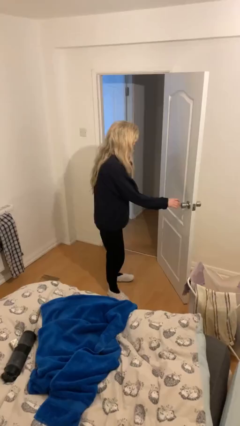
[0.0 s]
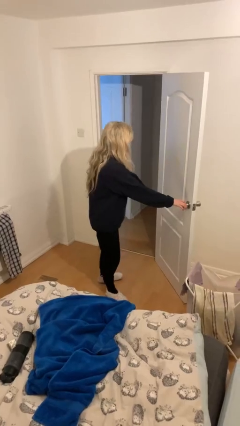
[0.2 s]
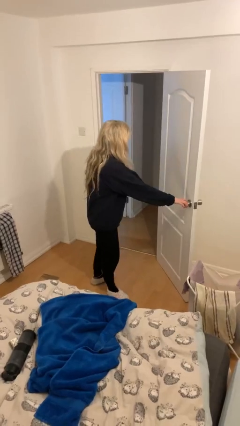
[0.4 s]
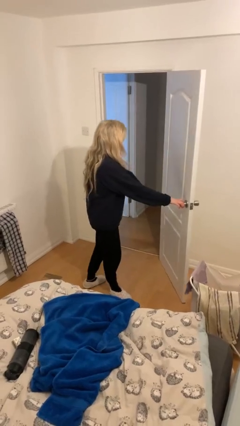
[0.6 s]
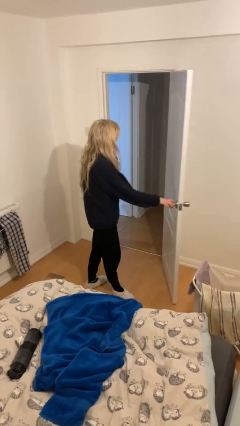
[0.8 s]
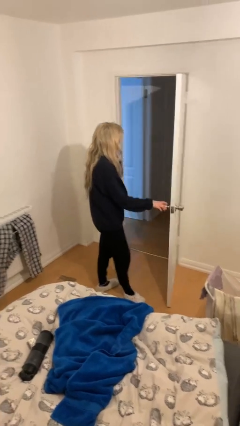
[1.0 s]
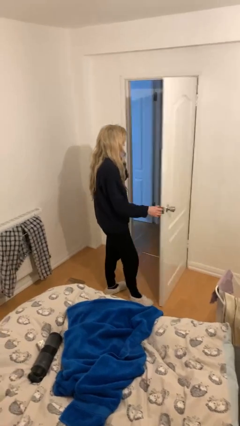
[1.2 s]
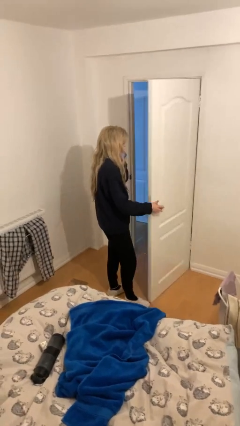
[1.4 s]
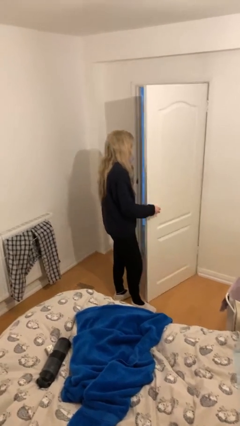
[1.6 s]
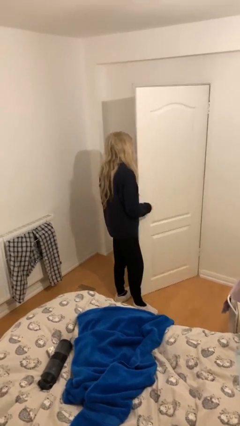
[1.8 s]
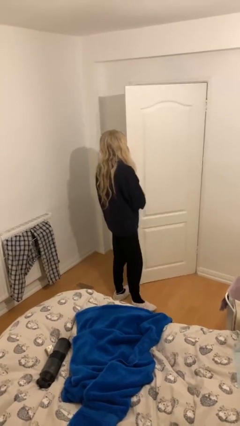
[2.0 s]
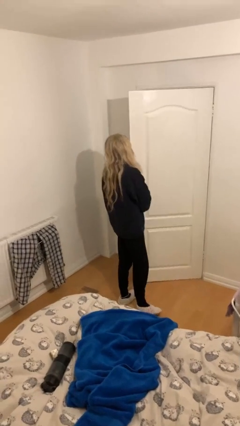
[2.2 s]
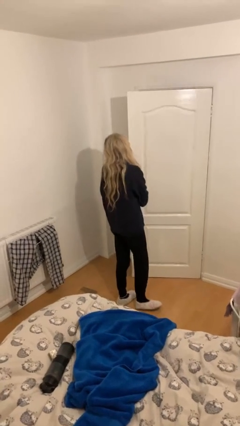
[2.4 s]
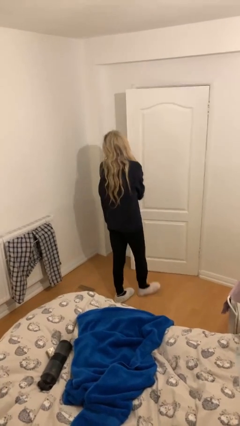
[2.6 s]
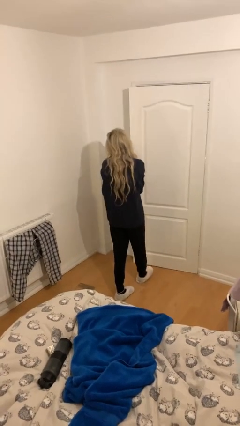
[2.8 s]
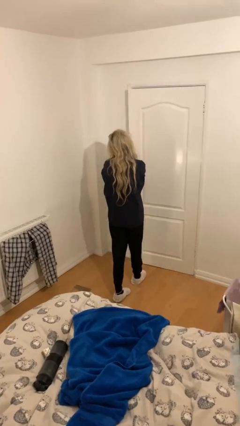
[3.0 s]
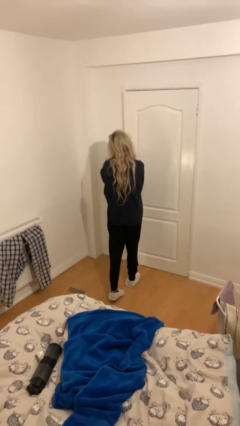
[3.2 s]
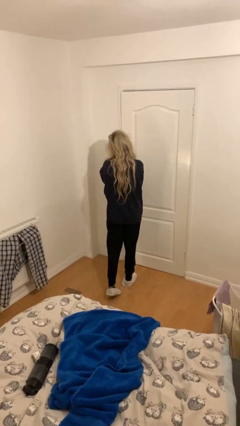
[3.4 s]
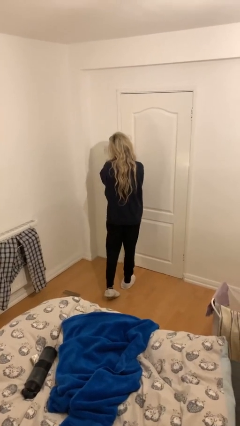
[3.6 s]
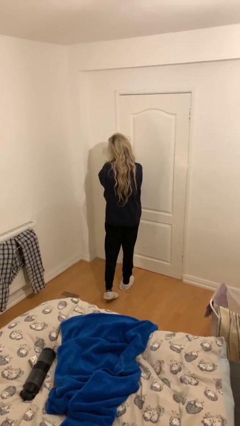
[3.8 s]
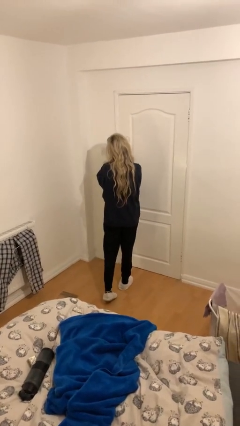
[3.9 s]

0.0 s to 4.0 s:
person closes facility door

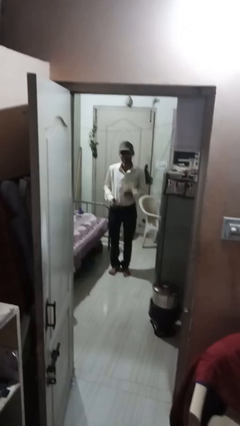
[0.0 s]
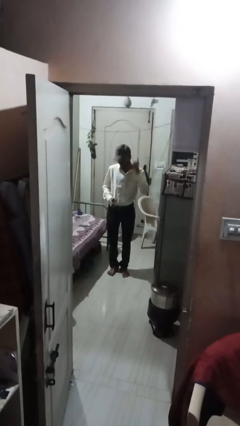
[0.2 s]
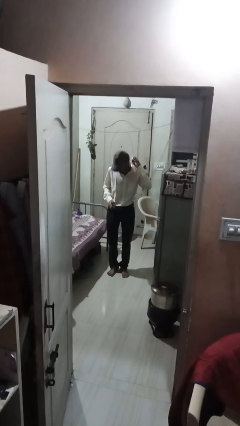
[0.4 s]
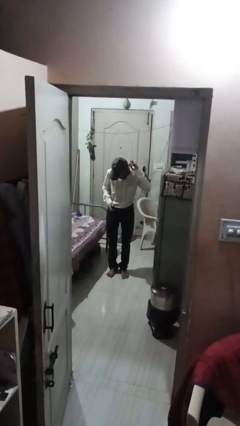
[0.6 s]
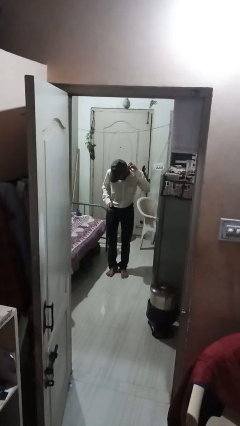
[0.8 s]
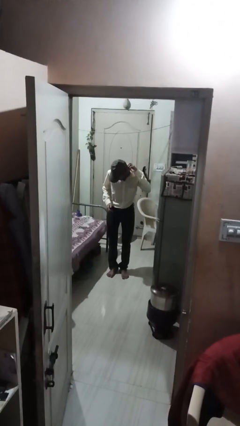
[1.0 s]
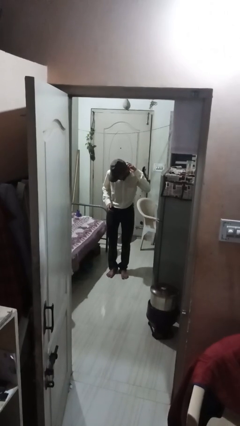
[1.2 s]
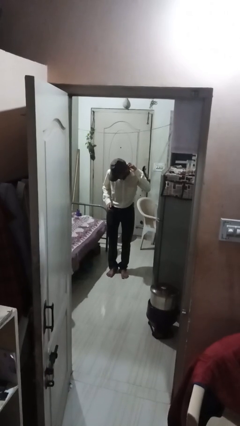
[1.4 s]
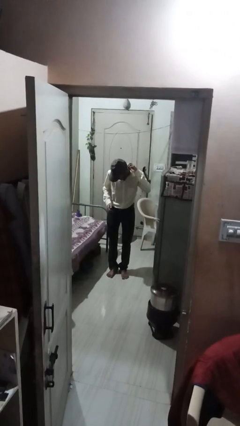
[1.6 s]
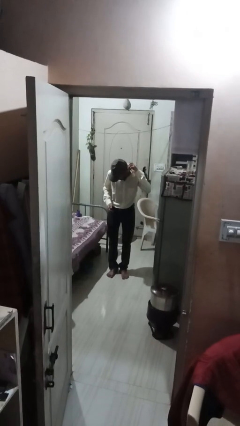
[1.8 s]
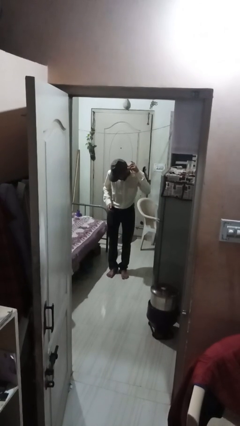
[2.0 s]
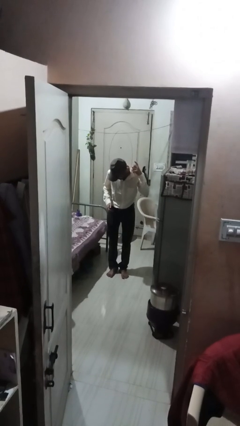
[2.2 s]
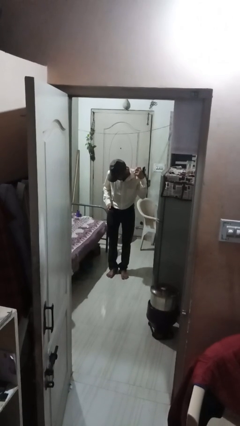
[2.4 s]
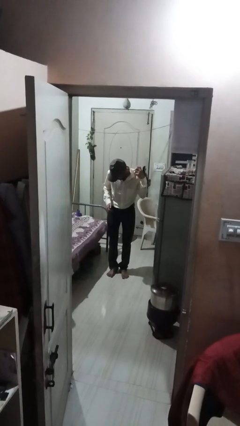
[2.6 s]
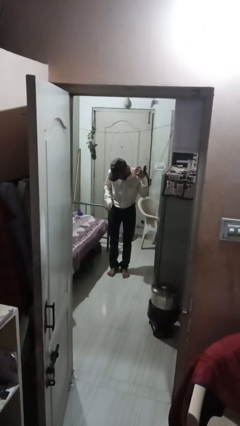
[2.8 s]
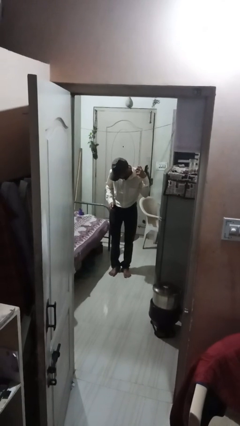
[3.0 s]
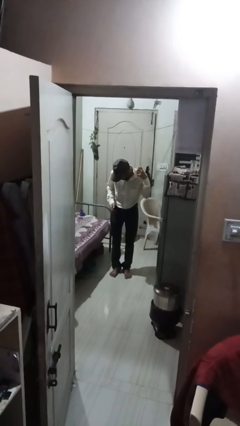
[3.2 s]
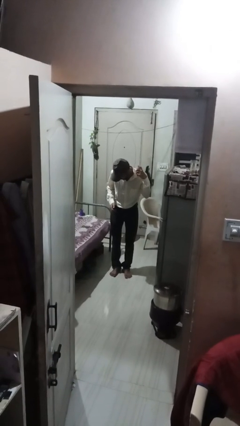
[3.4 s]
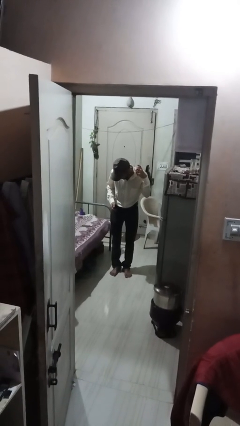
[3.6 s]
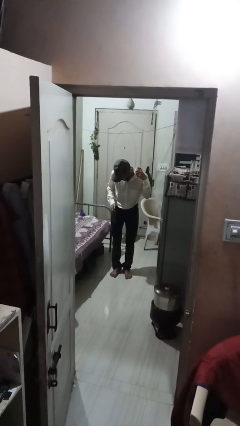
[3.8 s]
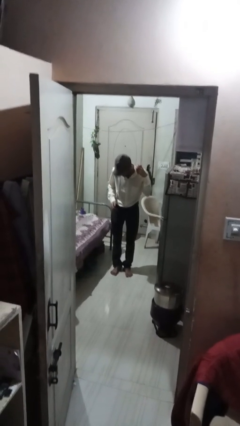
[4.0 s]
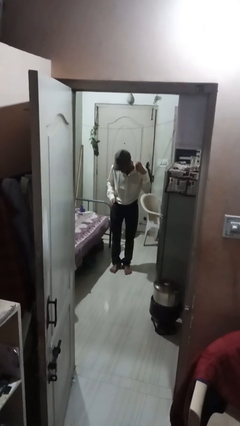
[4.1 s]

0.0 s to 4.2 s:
person applies deodorant

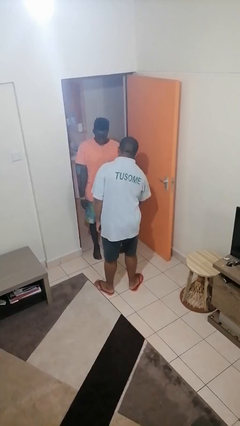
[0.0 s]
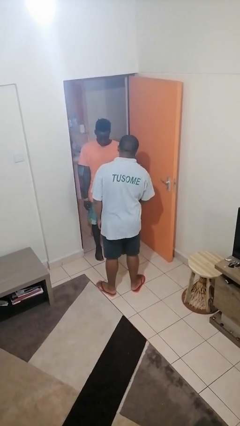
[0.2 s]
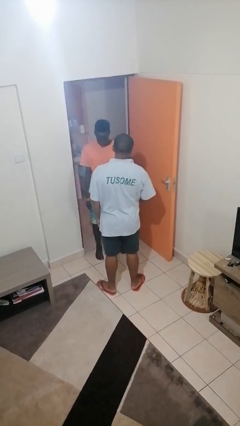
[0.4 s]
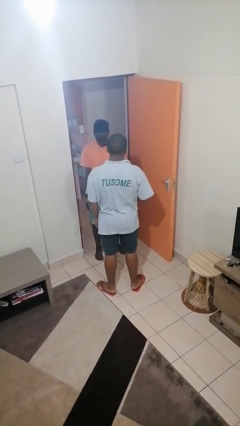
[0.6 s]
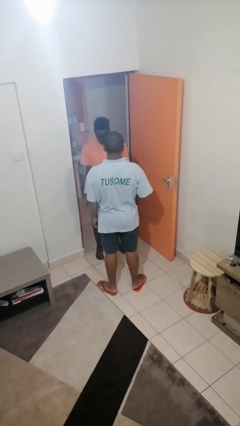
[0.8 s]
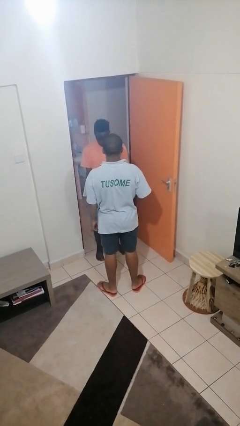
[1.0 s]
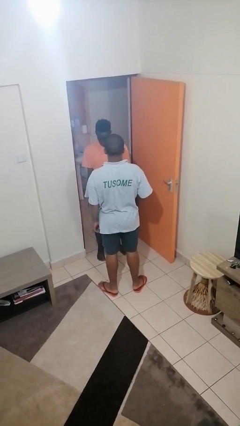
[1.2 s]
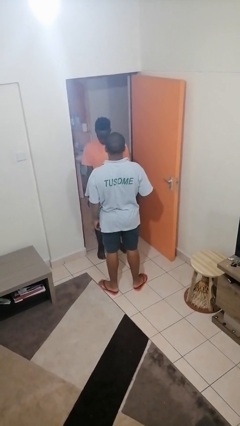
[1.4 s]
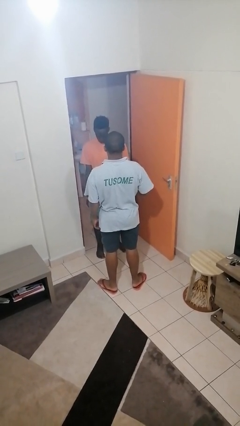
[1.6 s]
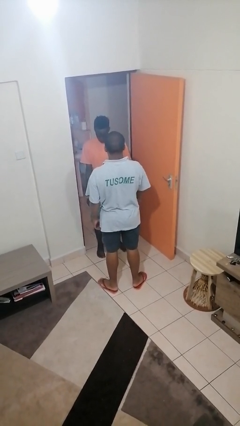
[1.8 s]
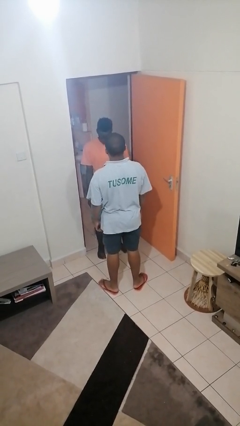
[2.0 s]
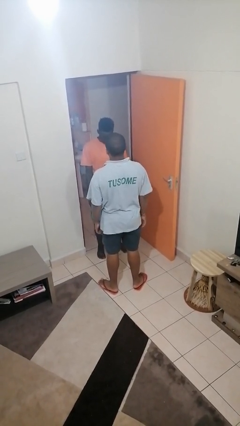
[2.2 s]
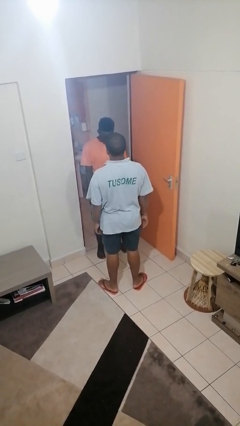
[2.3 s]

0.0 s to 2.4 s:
person grabs person by forearm

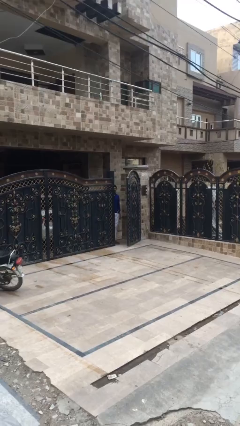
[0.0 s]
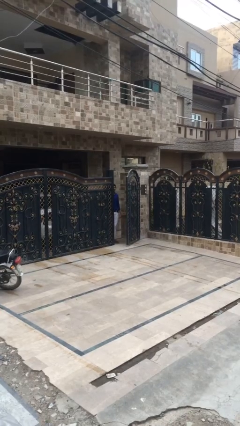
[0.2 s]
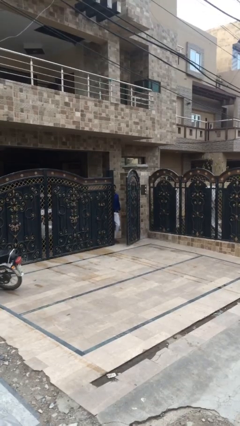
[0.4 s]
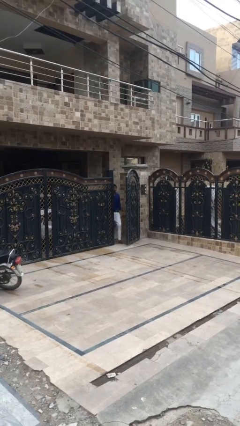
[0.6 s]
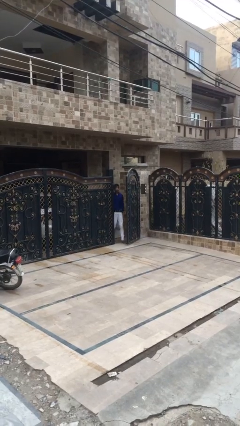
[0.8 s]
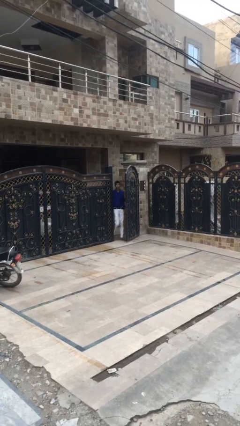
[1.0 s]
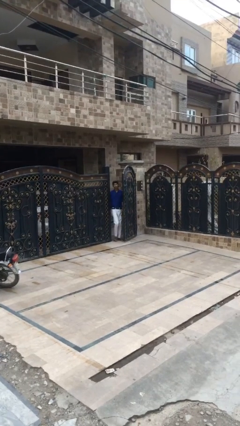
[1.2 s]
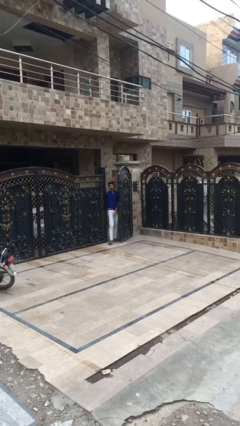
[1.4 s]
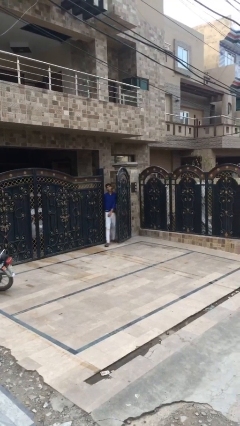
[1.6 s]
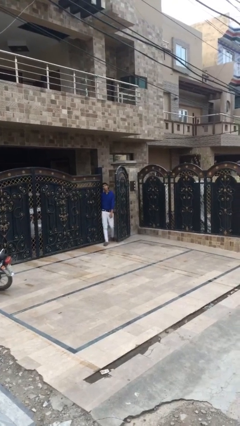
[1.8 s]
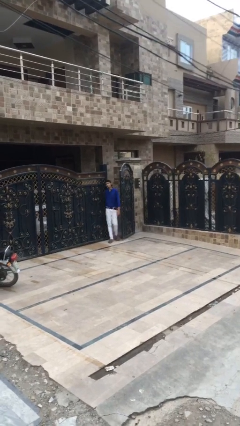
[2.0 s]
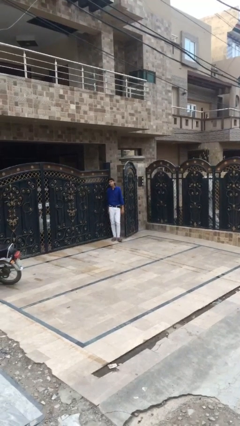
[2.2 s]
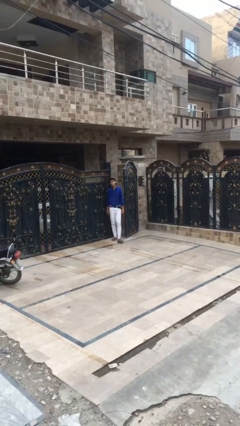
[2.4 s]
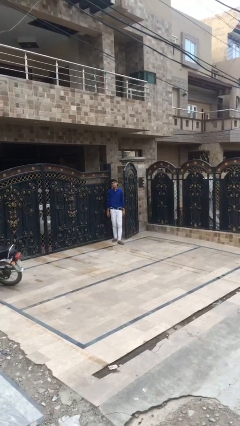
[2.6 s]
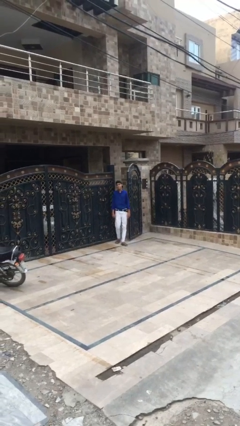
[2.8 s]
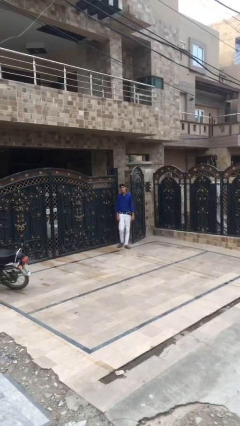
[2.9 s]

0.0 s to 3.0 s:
person enters scene through structure

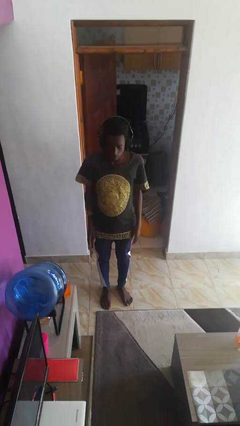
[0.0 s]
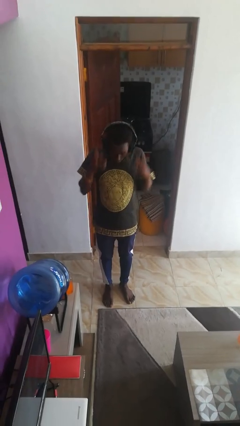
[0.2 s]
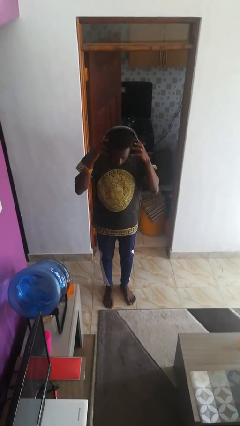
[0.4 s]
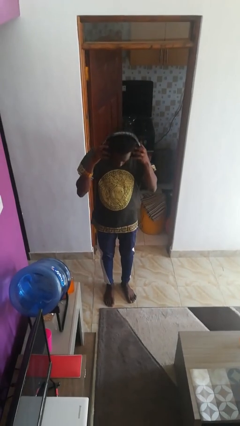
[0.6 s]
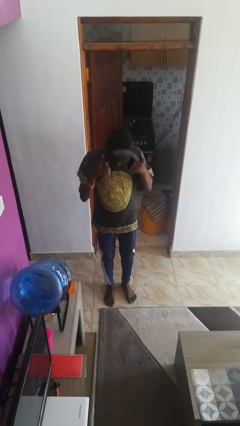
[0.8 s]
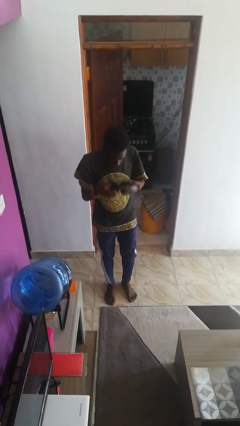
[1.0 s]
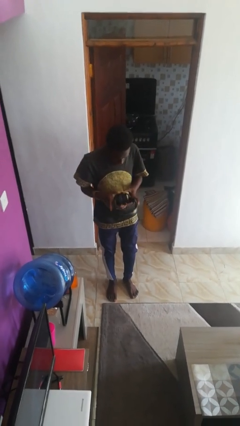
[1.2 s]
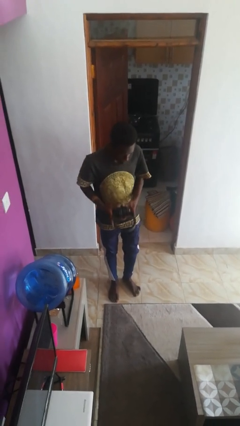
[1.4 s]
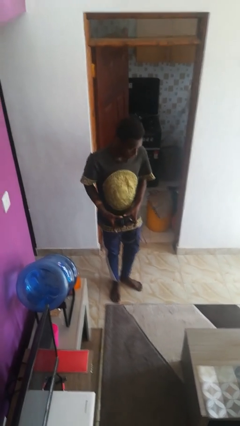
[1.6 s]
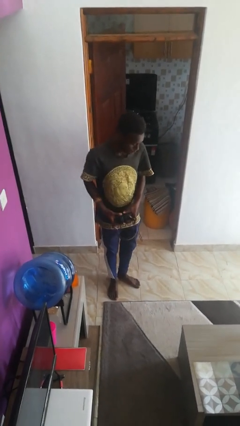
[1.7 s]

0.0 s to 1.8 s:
person takes off headphones

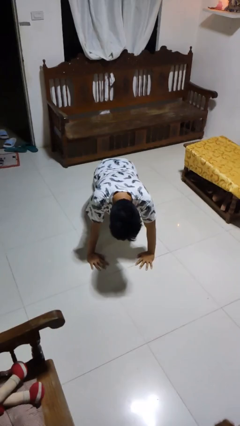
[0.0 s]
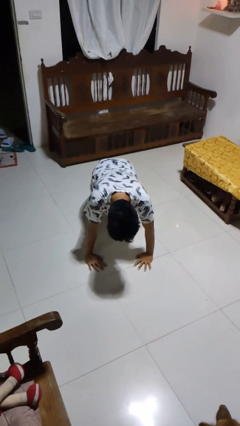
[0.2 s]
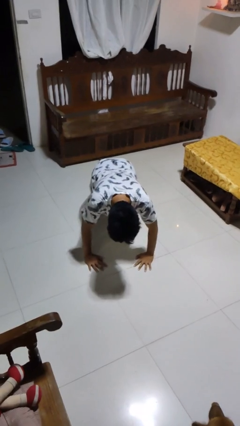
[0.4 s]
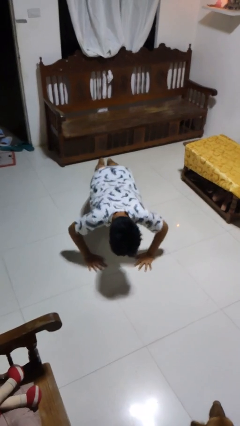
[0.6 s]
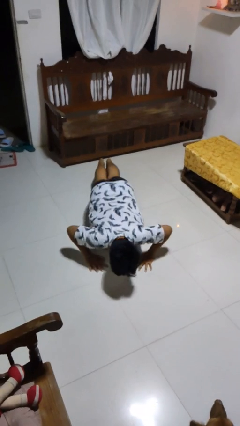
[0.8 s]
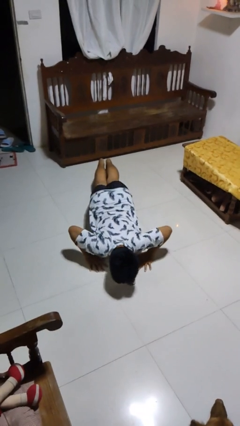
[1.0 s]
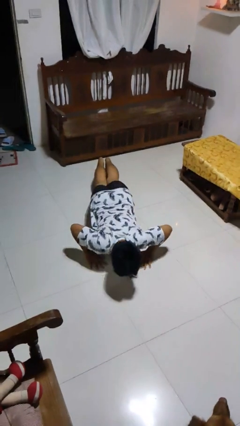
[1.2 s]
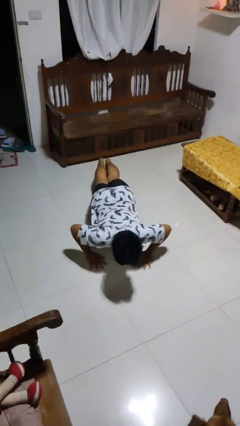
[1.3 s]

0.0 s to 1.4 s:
person exercises with pushup

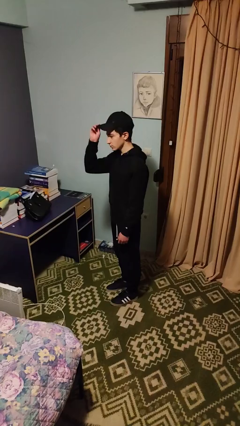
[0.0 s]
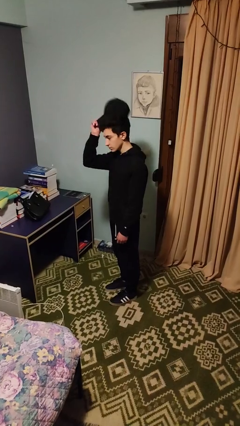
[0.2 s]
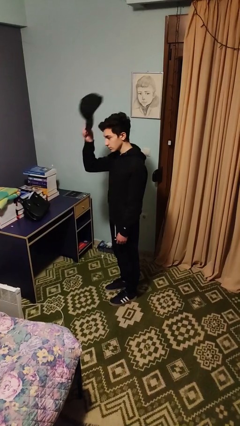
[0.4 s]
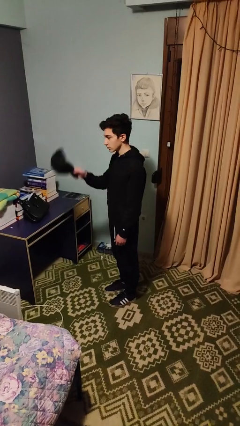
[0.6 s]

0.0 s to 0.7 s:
person takes off hat
